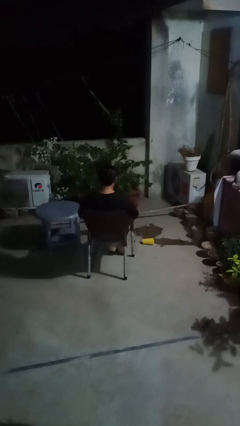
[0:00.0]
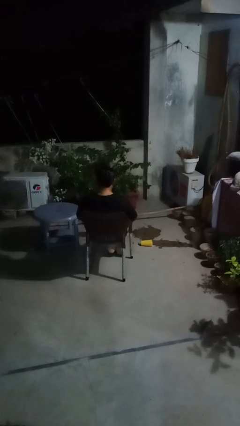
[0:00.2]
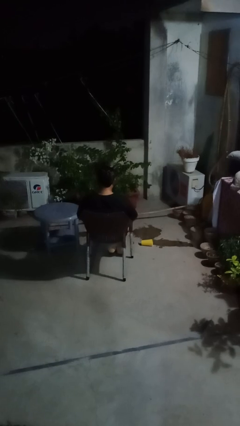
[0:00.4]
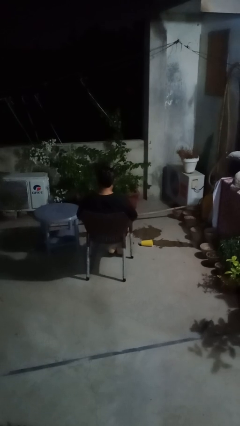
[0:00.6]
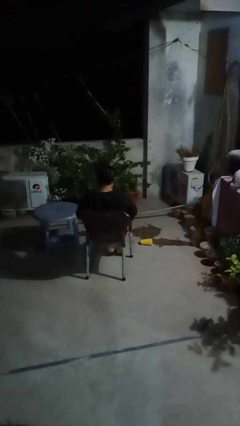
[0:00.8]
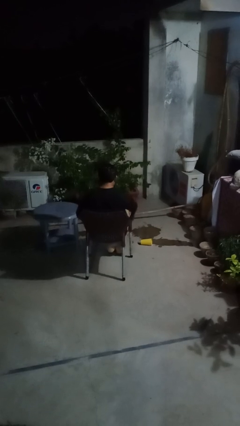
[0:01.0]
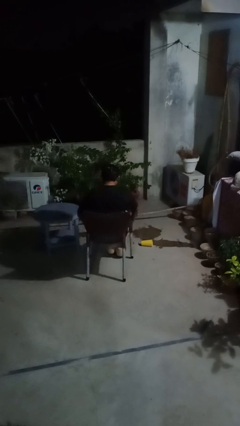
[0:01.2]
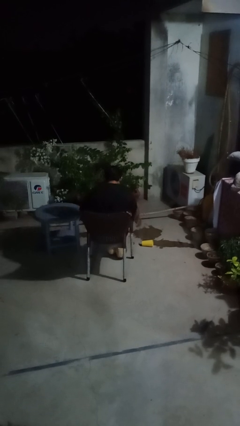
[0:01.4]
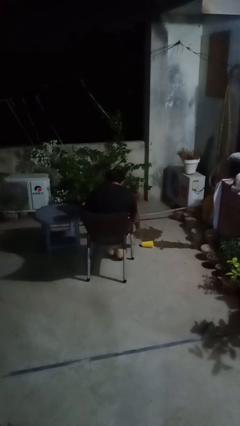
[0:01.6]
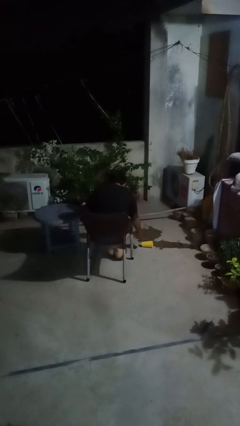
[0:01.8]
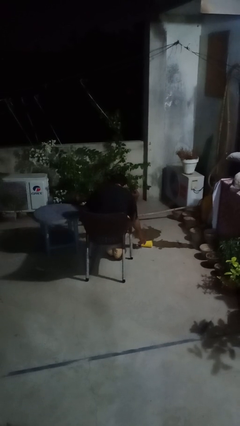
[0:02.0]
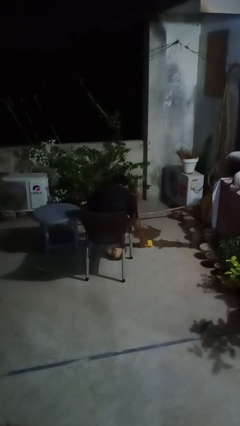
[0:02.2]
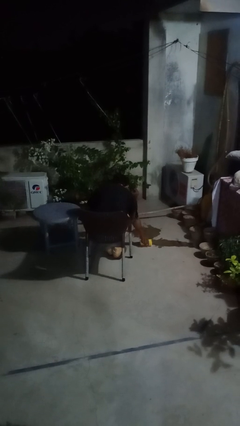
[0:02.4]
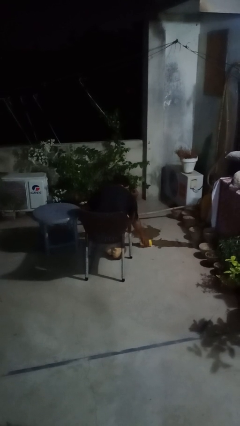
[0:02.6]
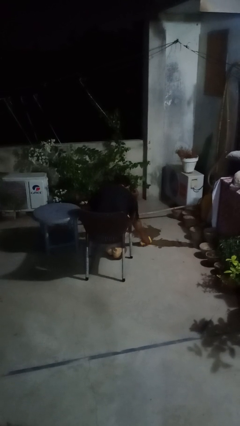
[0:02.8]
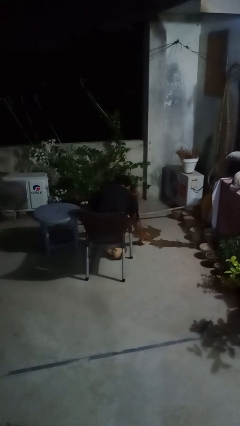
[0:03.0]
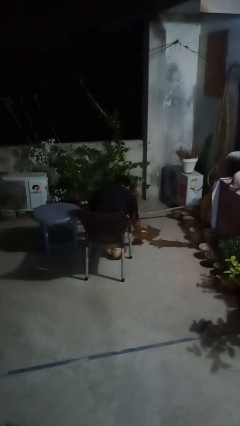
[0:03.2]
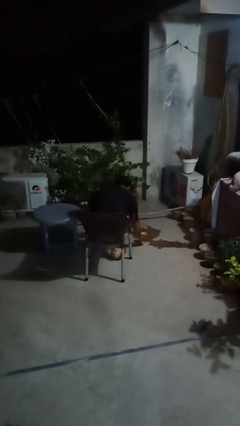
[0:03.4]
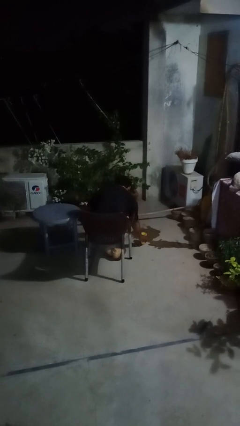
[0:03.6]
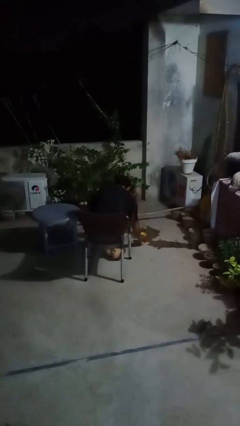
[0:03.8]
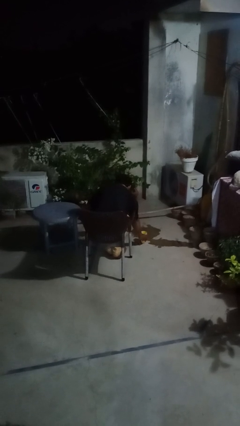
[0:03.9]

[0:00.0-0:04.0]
person sets upright glass

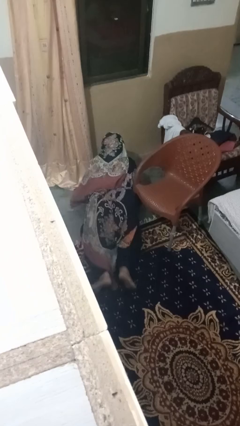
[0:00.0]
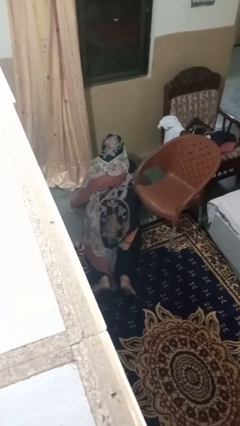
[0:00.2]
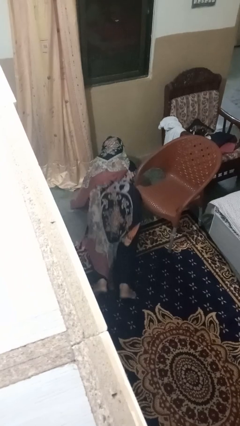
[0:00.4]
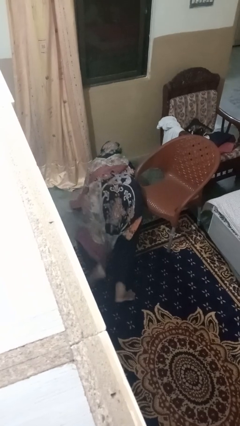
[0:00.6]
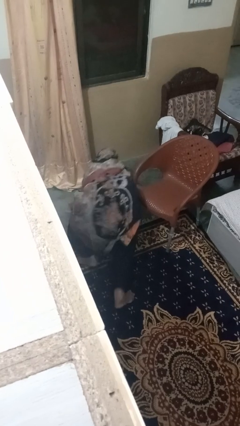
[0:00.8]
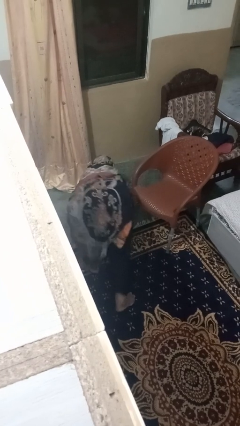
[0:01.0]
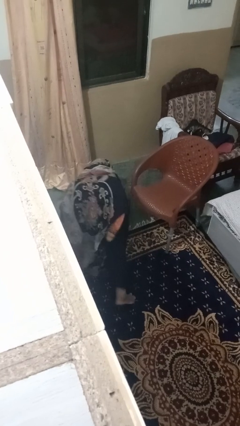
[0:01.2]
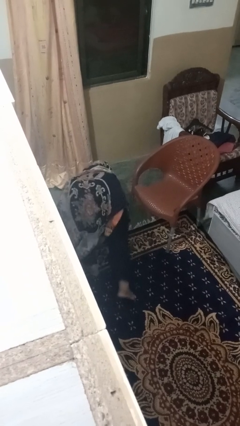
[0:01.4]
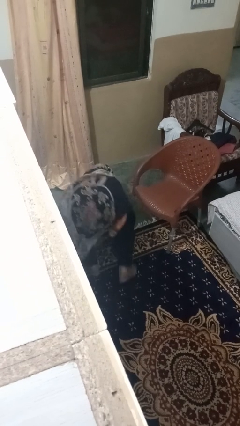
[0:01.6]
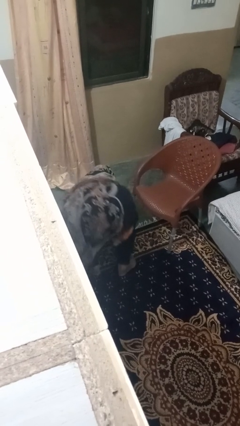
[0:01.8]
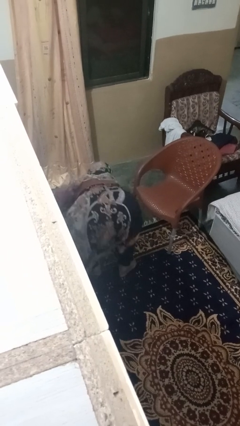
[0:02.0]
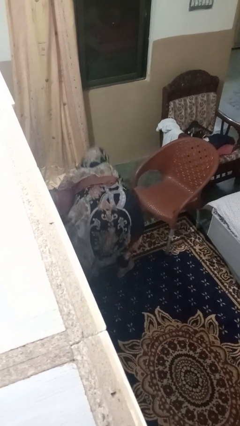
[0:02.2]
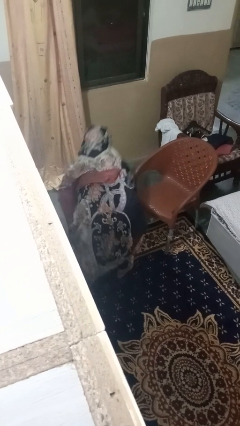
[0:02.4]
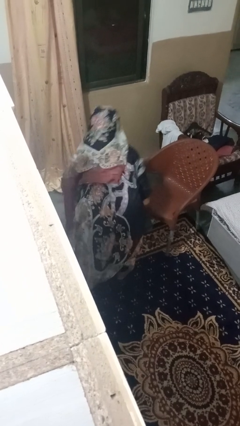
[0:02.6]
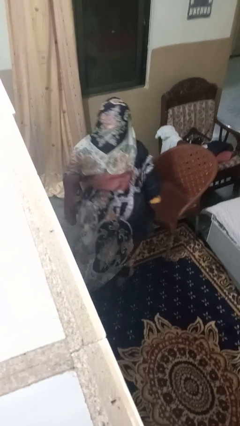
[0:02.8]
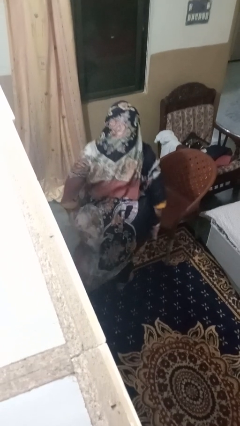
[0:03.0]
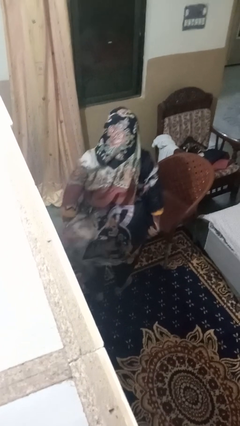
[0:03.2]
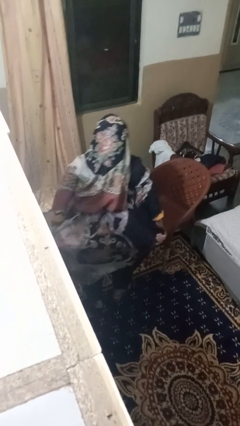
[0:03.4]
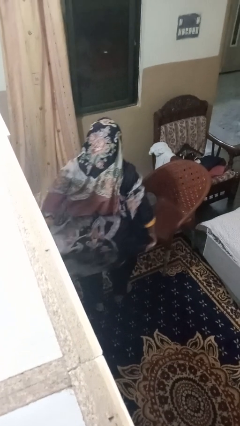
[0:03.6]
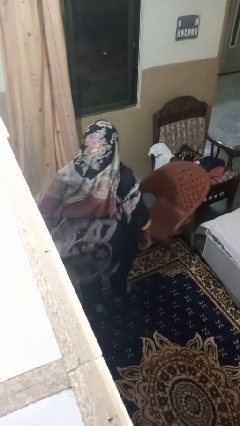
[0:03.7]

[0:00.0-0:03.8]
person stands up from floor

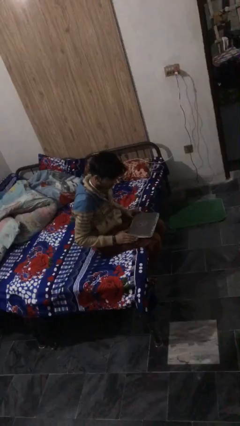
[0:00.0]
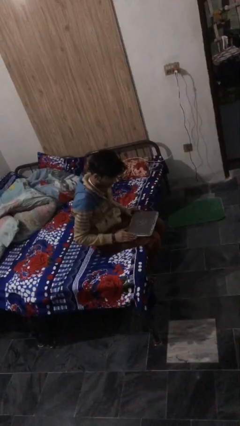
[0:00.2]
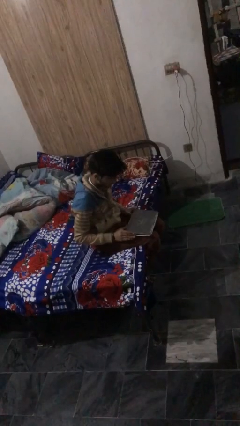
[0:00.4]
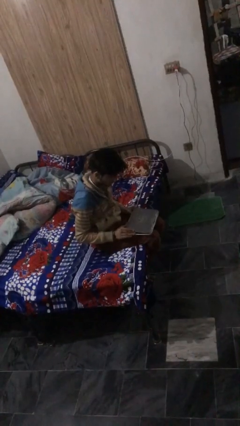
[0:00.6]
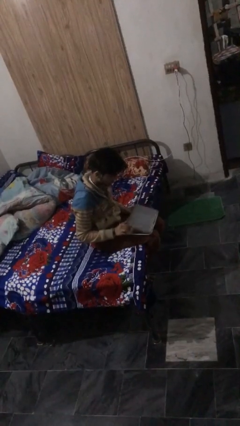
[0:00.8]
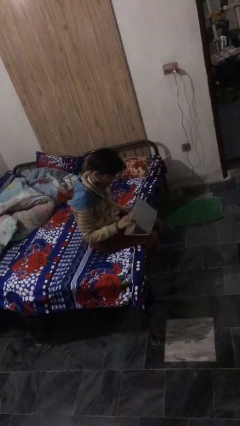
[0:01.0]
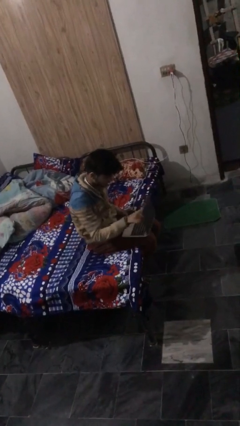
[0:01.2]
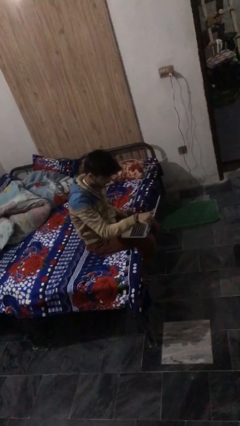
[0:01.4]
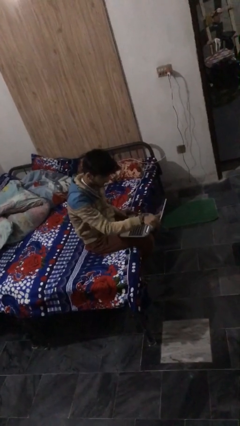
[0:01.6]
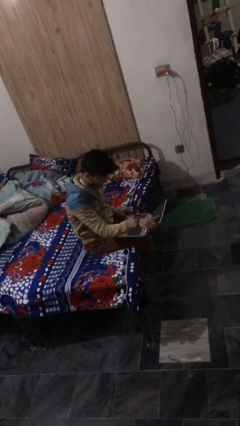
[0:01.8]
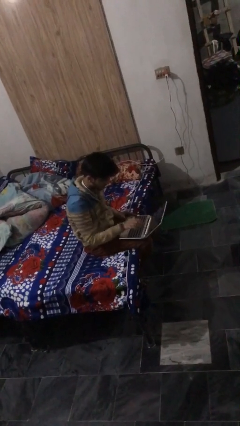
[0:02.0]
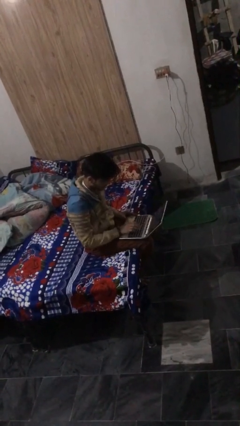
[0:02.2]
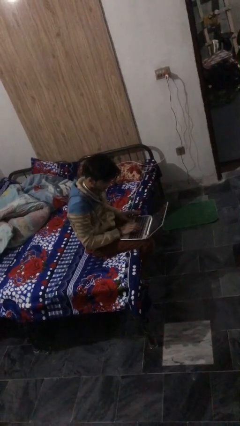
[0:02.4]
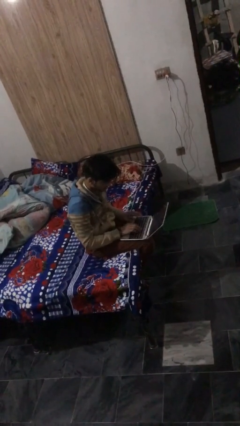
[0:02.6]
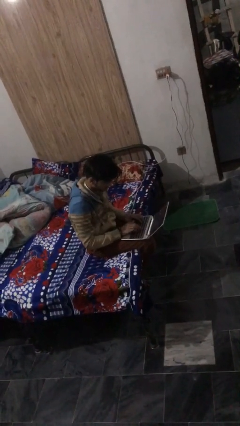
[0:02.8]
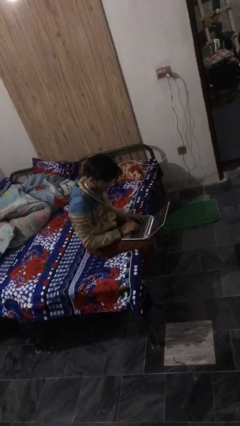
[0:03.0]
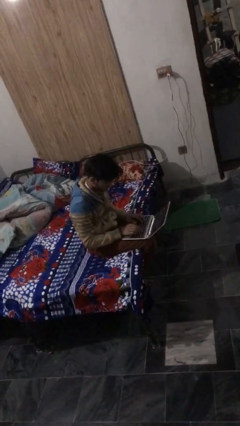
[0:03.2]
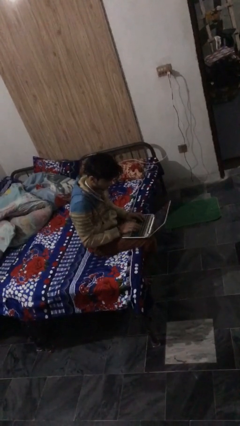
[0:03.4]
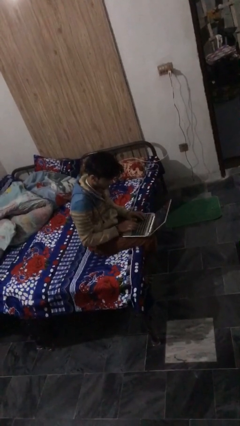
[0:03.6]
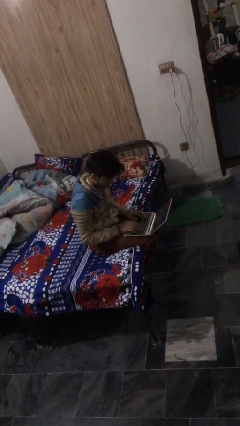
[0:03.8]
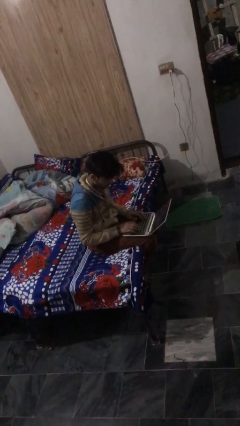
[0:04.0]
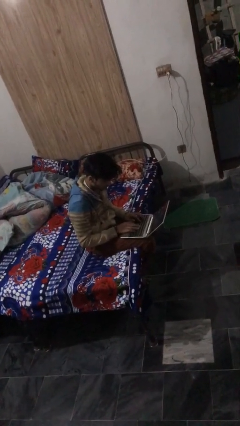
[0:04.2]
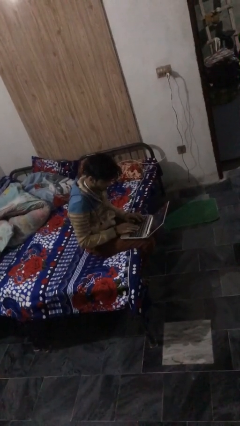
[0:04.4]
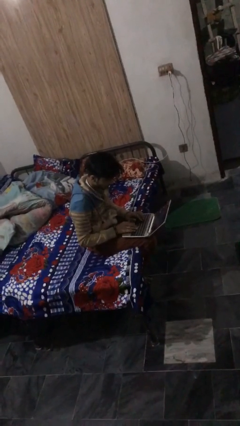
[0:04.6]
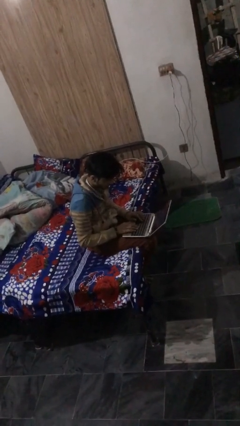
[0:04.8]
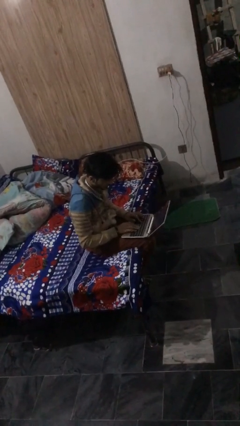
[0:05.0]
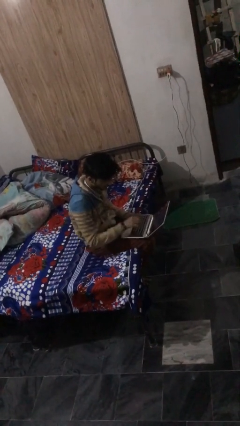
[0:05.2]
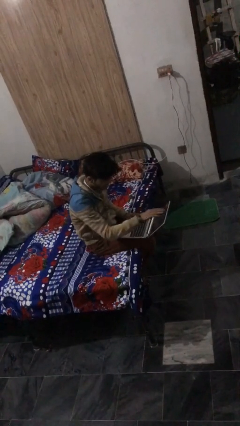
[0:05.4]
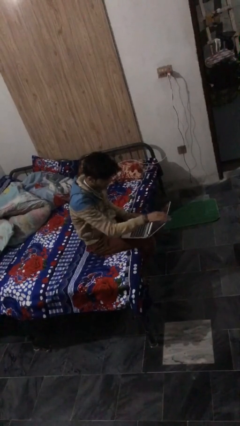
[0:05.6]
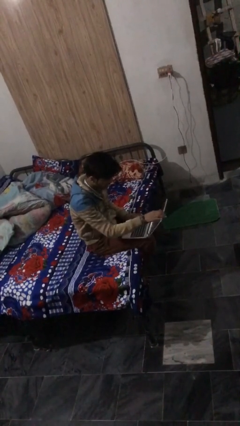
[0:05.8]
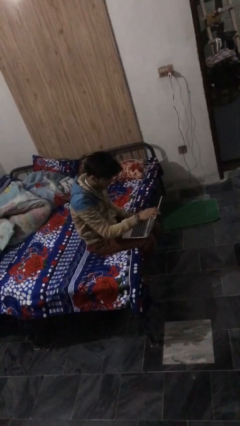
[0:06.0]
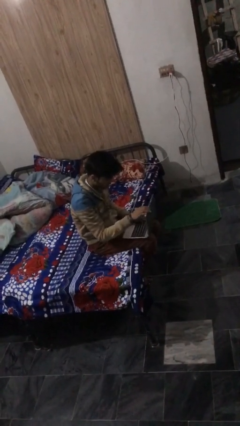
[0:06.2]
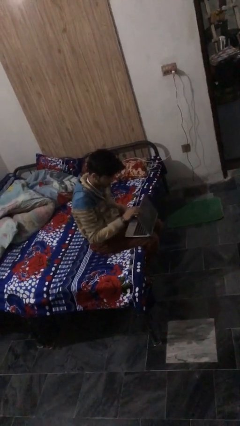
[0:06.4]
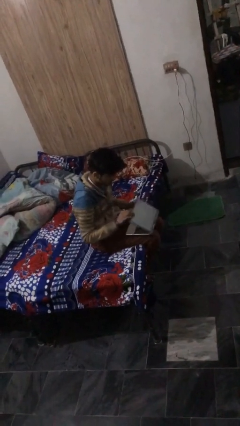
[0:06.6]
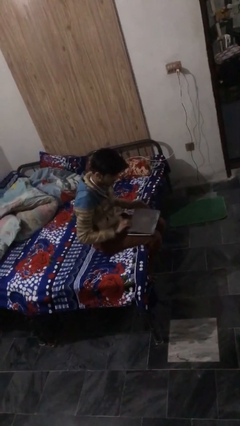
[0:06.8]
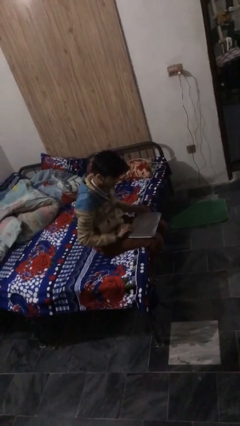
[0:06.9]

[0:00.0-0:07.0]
person interacts with laptop

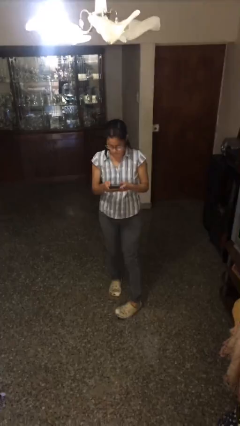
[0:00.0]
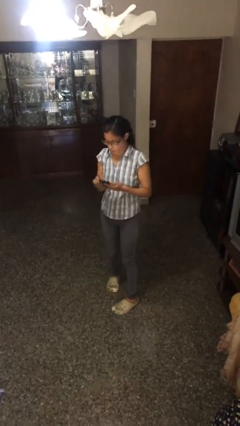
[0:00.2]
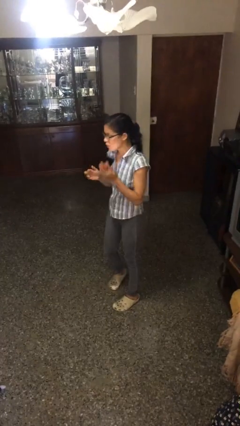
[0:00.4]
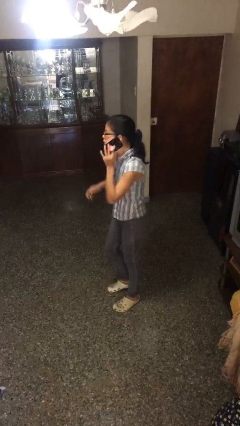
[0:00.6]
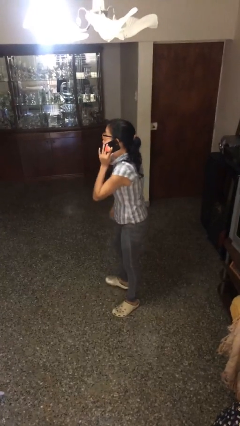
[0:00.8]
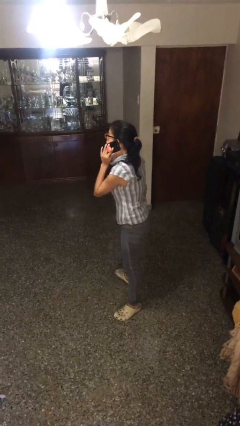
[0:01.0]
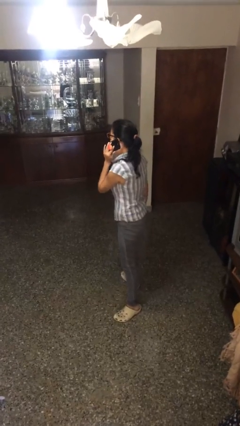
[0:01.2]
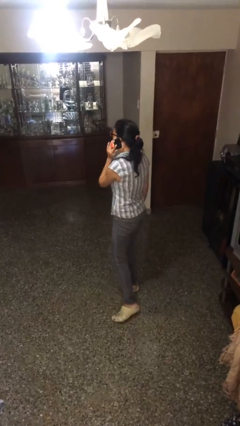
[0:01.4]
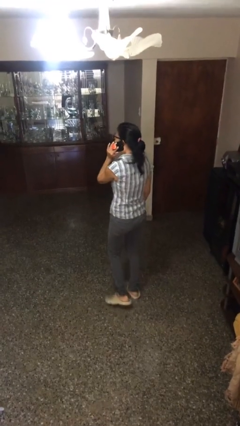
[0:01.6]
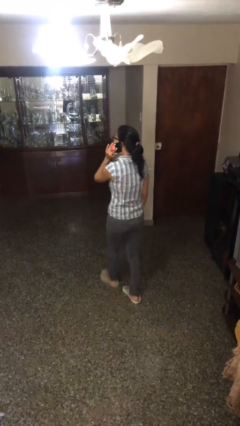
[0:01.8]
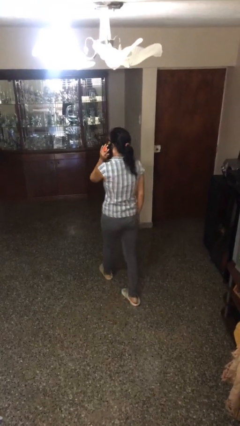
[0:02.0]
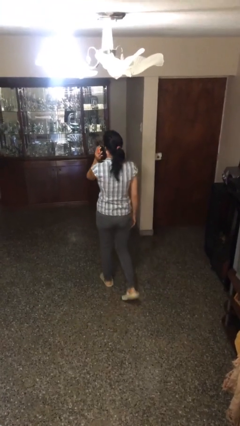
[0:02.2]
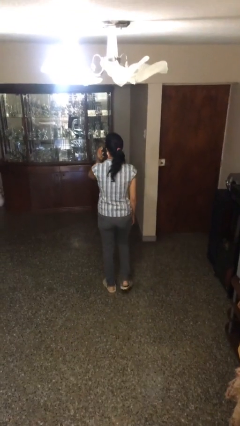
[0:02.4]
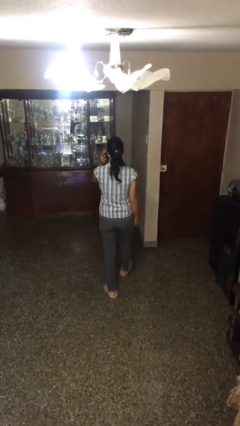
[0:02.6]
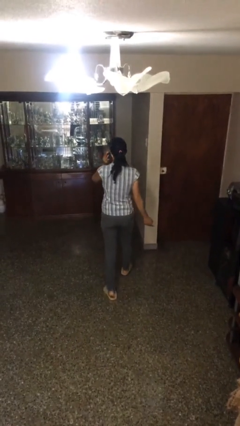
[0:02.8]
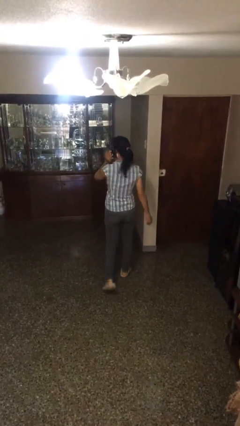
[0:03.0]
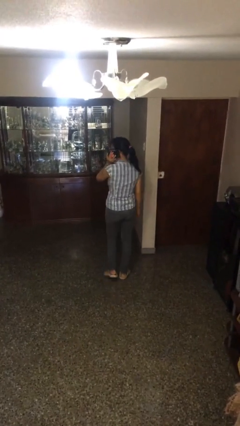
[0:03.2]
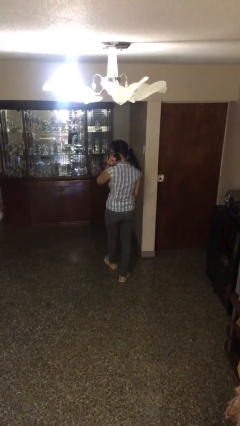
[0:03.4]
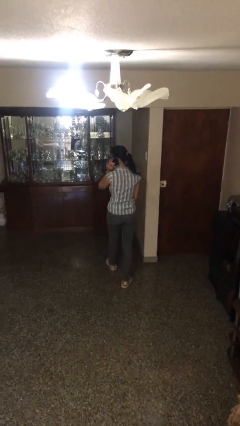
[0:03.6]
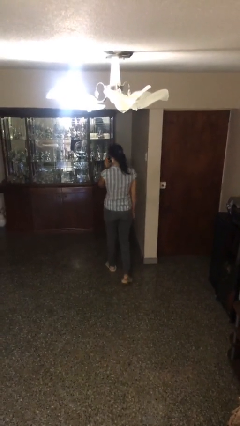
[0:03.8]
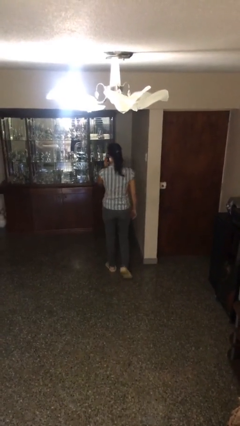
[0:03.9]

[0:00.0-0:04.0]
person talks on phone
